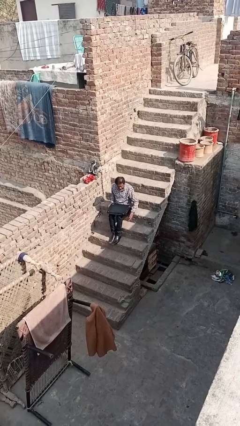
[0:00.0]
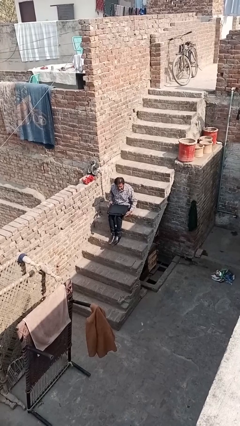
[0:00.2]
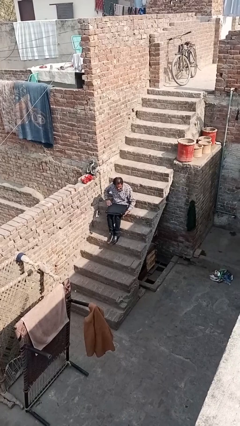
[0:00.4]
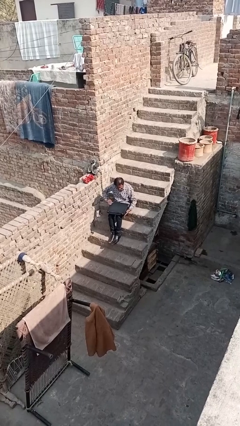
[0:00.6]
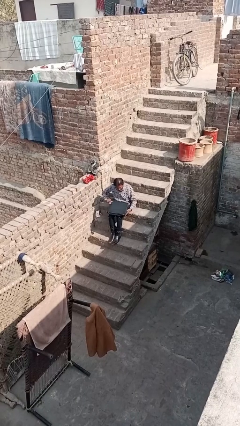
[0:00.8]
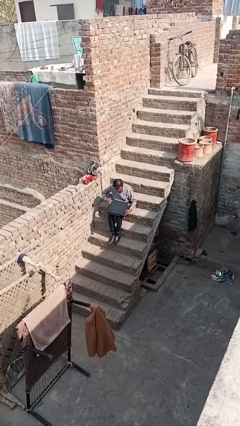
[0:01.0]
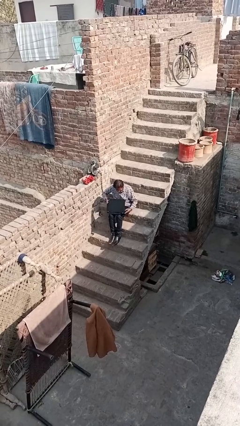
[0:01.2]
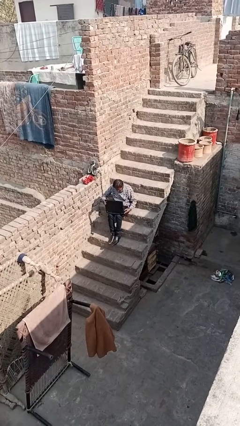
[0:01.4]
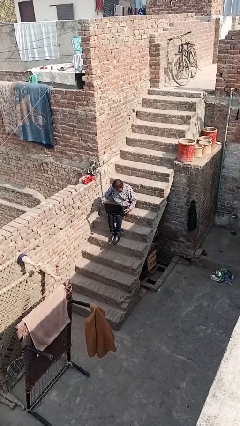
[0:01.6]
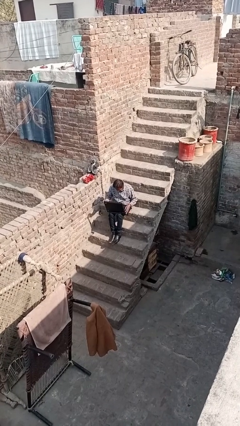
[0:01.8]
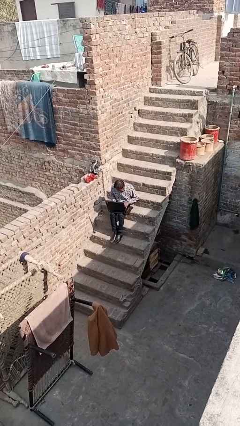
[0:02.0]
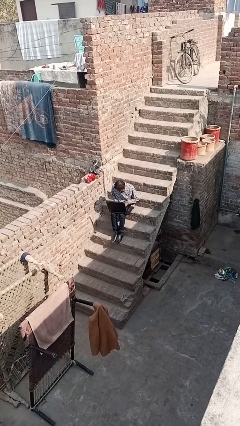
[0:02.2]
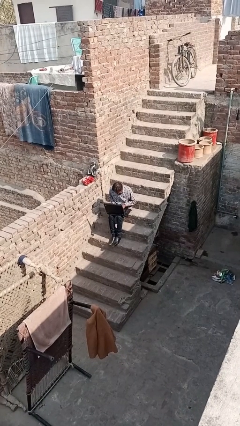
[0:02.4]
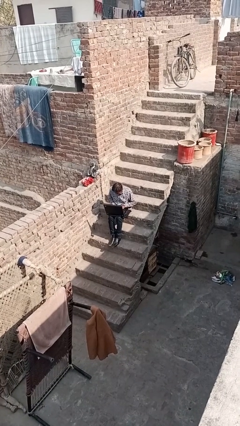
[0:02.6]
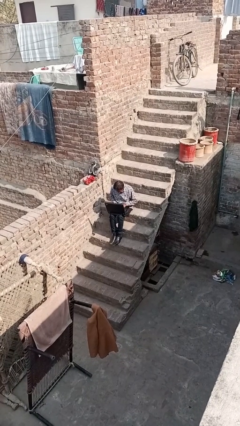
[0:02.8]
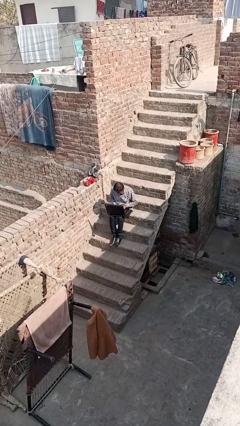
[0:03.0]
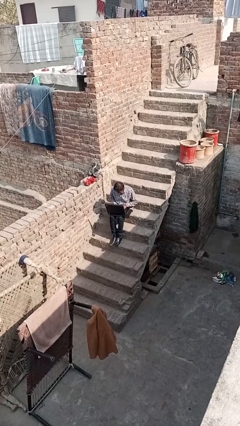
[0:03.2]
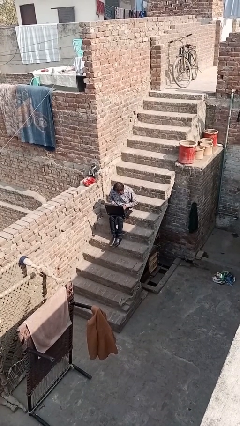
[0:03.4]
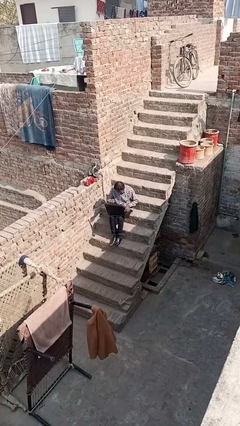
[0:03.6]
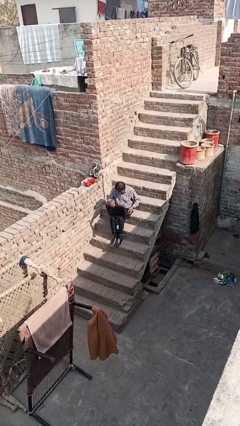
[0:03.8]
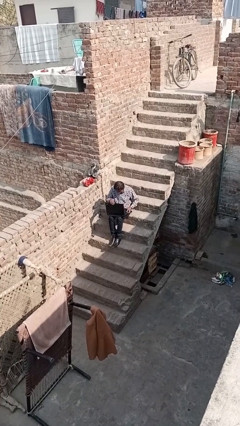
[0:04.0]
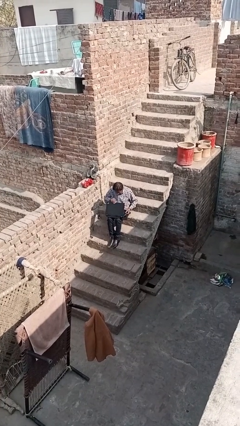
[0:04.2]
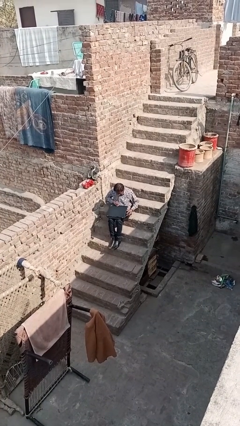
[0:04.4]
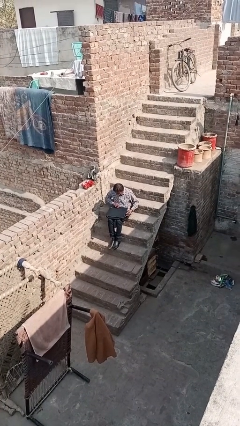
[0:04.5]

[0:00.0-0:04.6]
person interacts with laptop

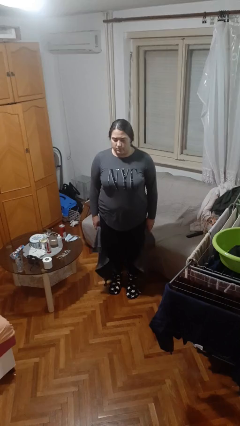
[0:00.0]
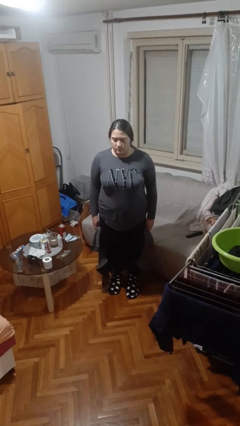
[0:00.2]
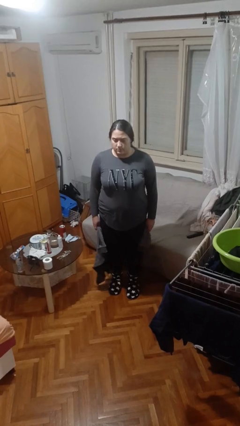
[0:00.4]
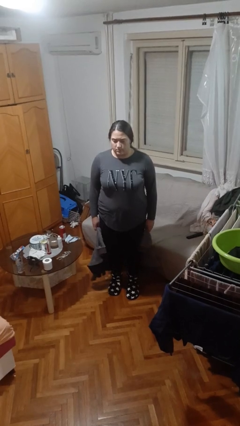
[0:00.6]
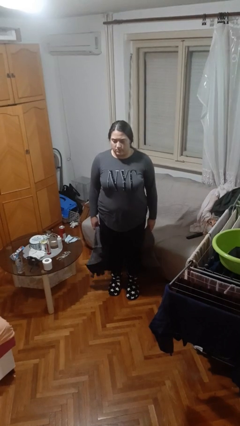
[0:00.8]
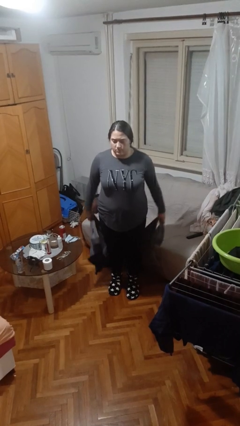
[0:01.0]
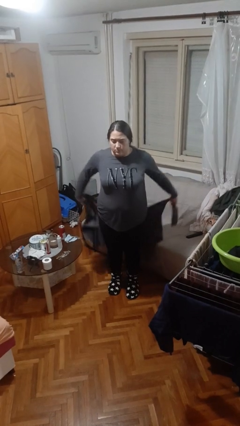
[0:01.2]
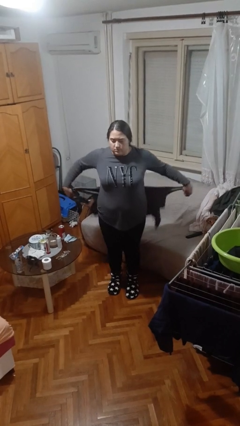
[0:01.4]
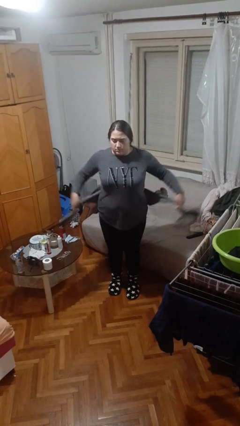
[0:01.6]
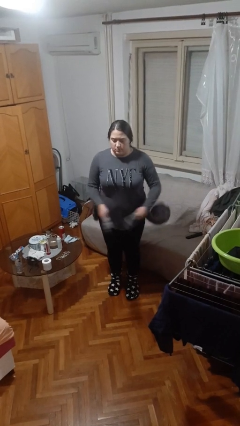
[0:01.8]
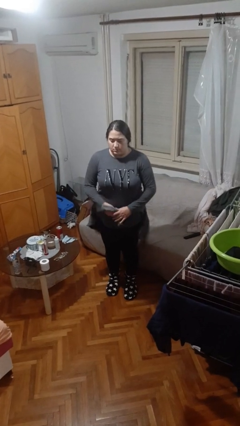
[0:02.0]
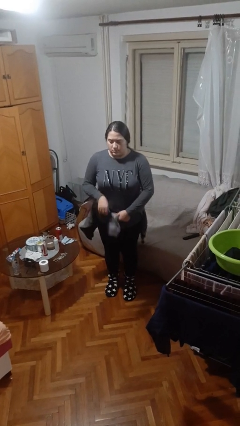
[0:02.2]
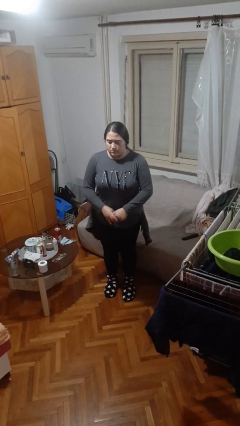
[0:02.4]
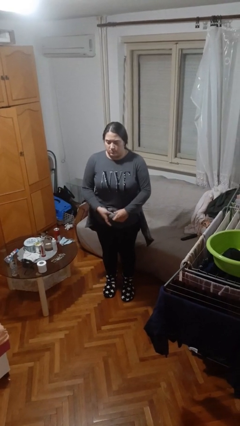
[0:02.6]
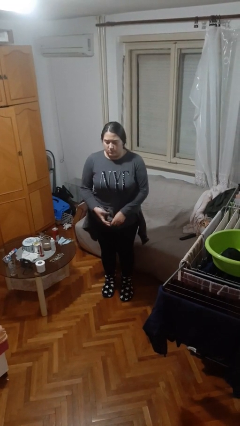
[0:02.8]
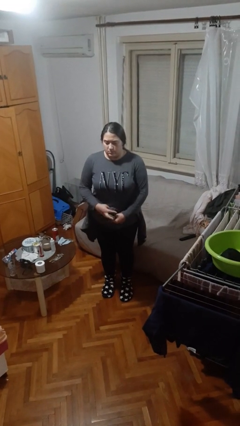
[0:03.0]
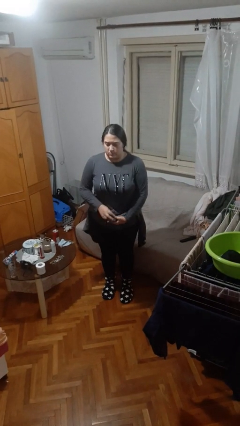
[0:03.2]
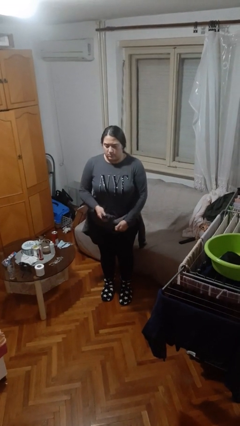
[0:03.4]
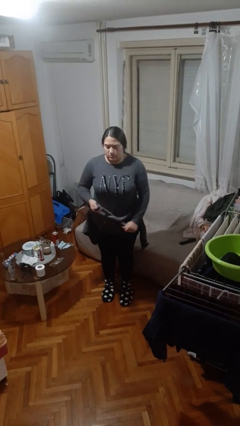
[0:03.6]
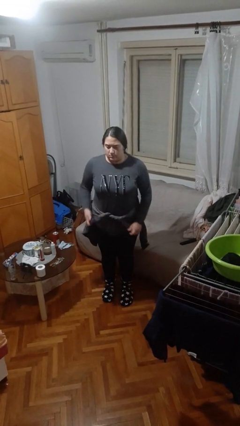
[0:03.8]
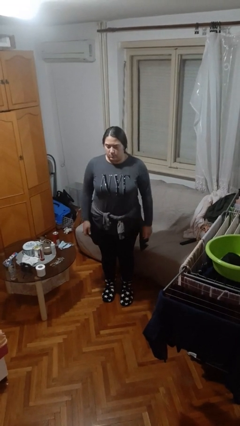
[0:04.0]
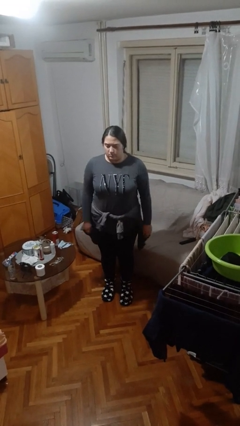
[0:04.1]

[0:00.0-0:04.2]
person ties jacket around waist

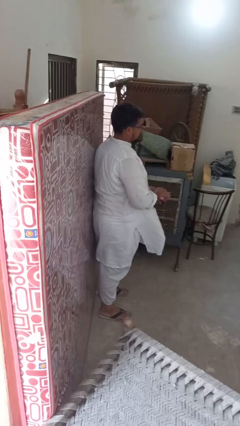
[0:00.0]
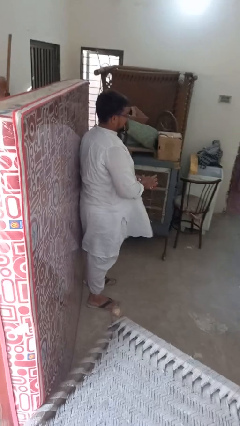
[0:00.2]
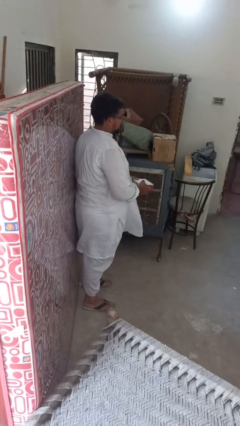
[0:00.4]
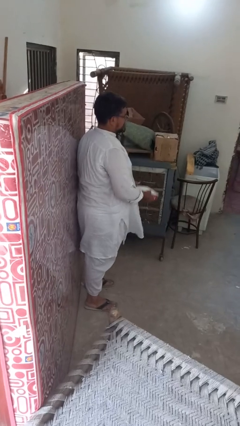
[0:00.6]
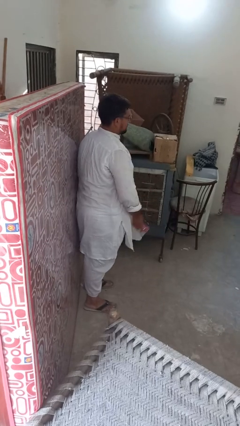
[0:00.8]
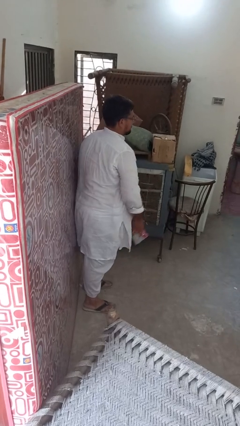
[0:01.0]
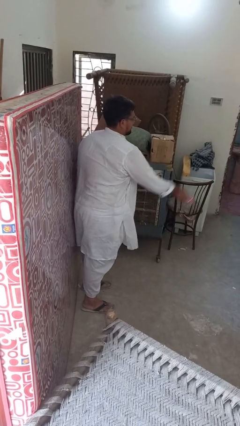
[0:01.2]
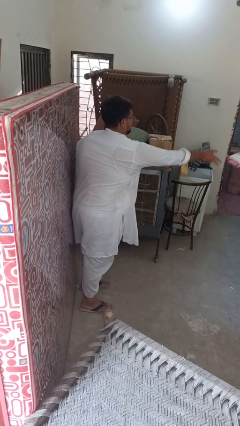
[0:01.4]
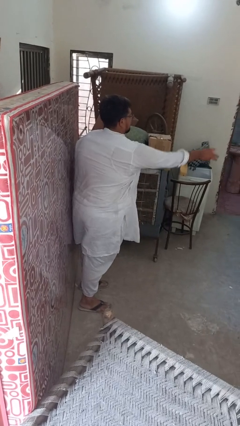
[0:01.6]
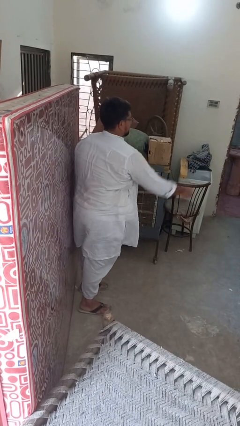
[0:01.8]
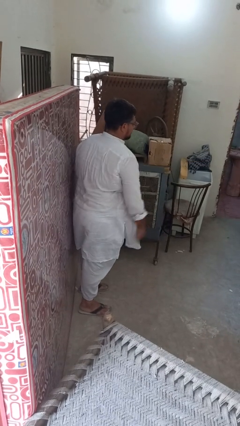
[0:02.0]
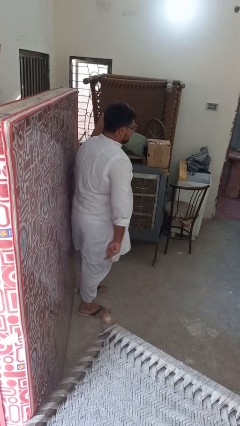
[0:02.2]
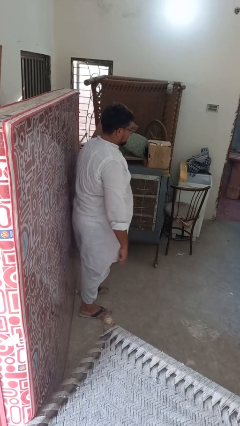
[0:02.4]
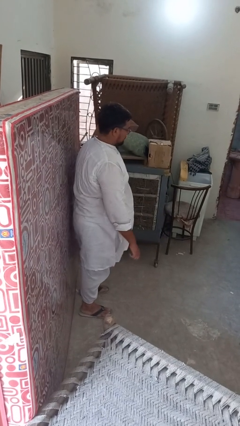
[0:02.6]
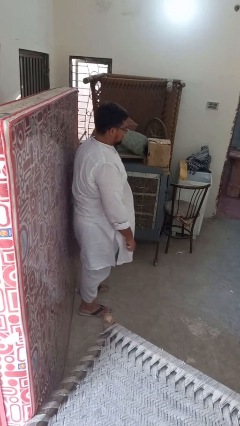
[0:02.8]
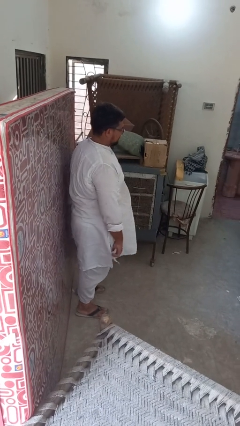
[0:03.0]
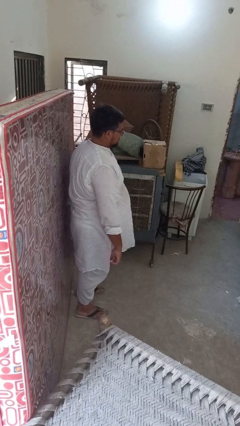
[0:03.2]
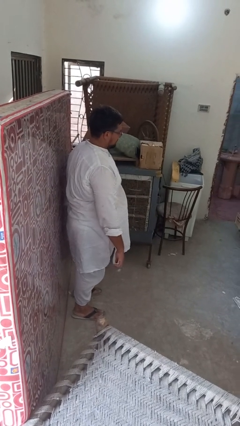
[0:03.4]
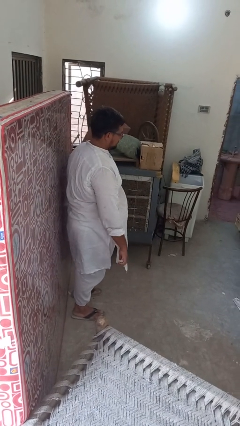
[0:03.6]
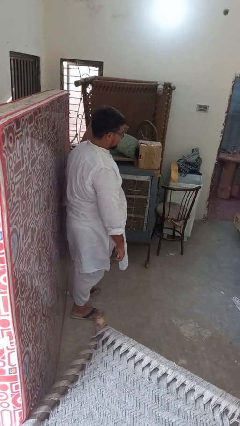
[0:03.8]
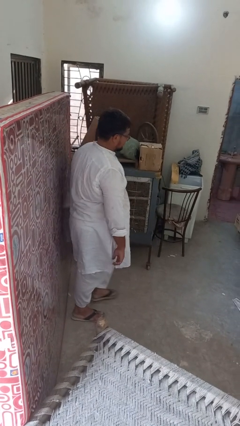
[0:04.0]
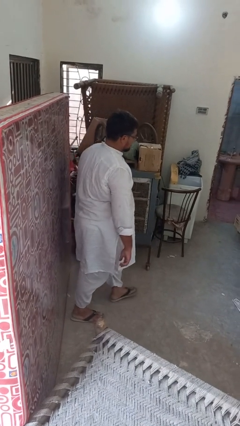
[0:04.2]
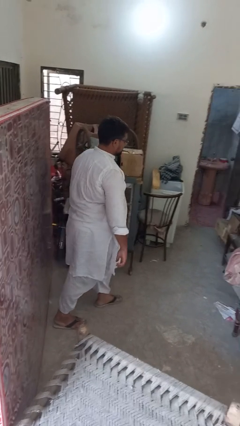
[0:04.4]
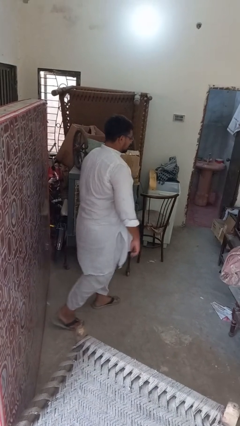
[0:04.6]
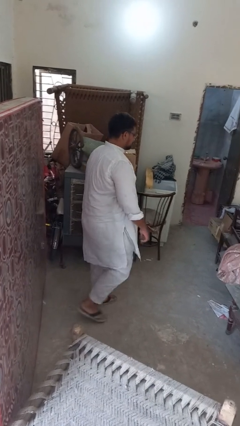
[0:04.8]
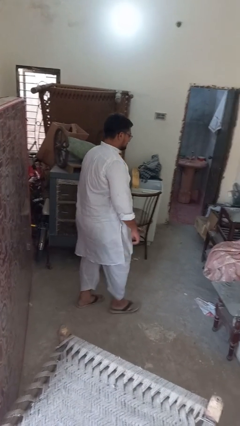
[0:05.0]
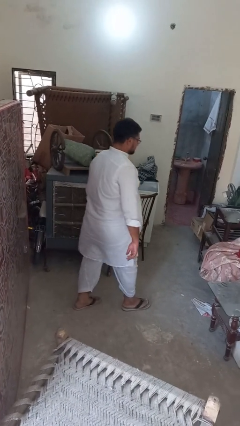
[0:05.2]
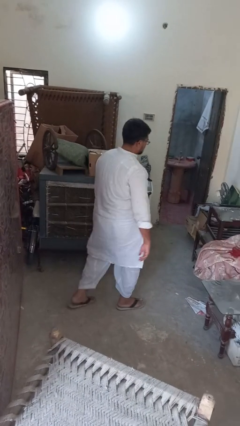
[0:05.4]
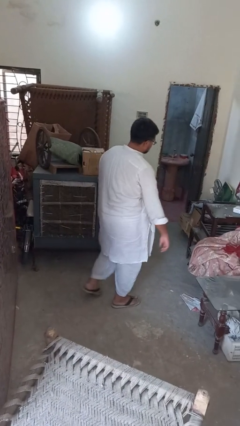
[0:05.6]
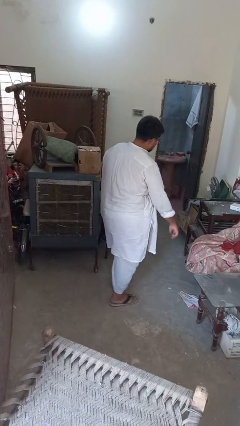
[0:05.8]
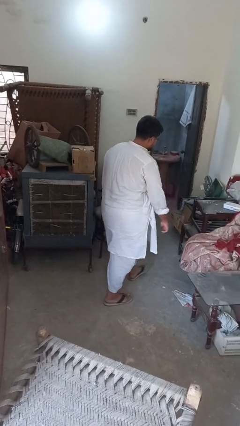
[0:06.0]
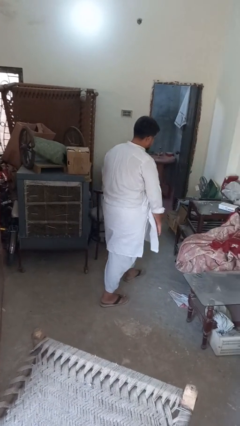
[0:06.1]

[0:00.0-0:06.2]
person throws object on table

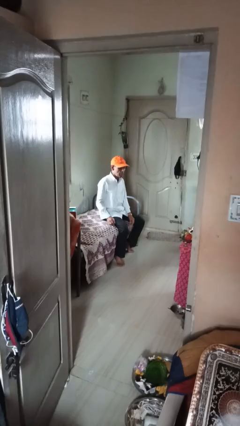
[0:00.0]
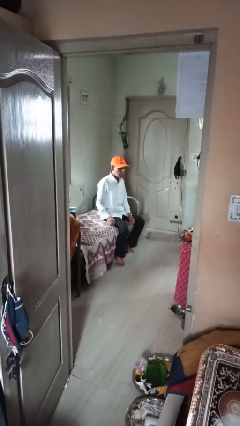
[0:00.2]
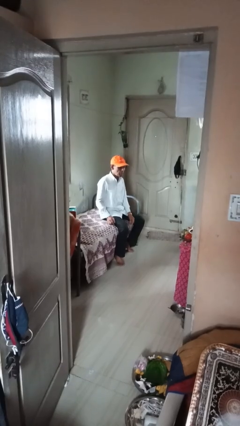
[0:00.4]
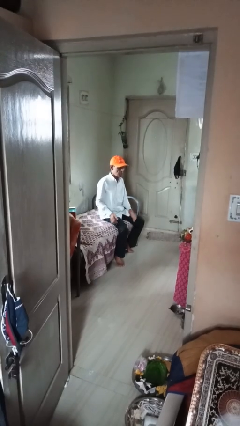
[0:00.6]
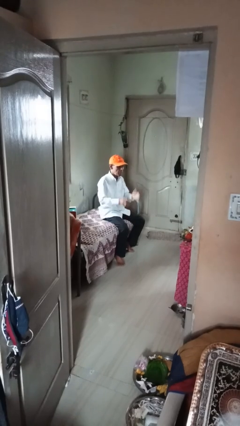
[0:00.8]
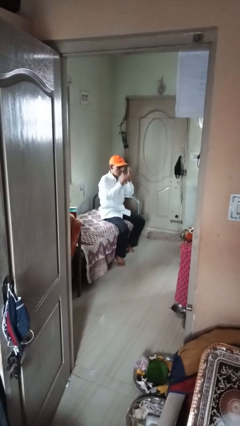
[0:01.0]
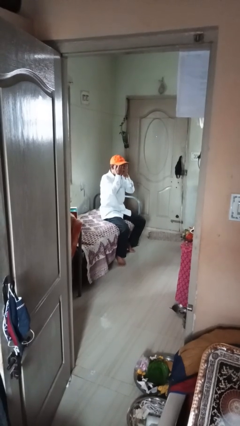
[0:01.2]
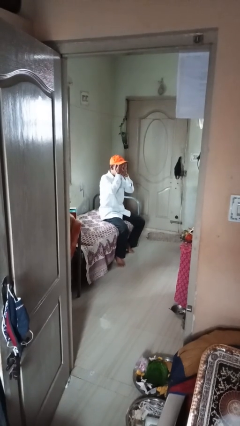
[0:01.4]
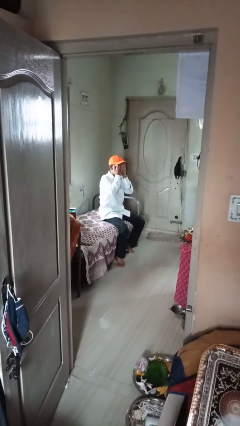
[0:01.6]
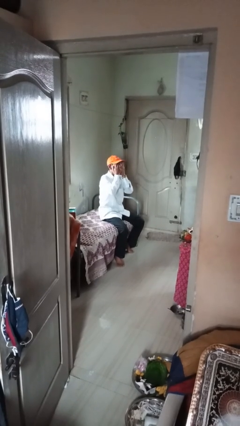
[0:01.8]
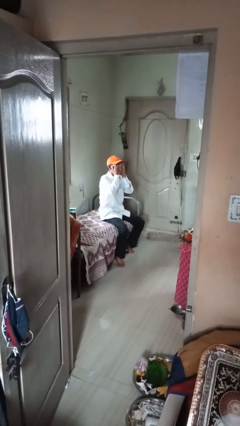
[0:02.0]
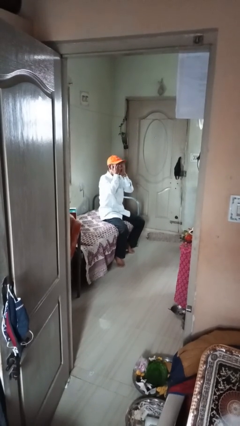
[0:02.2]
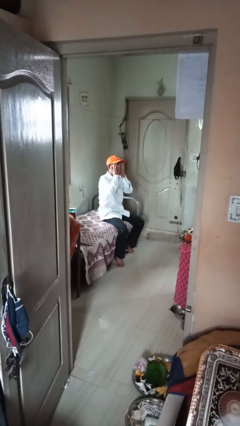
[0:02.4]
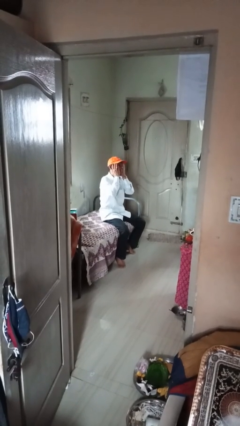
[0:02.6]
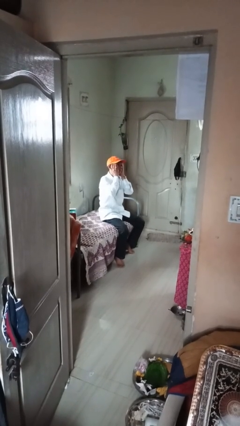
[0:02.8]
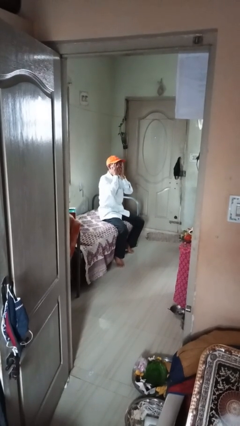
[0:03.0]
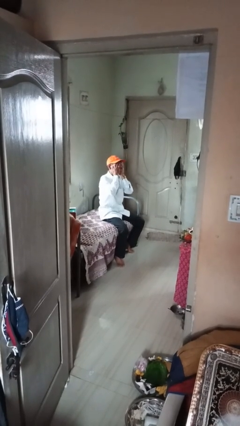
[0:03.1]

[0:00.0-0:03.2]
person covers face with hands
